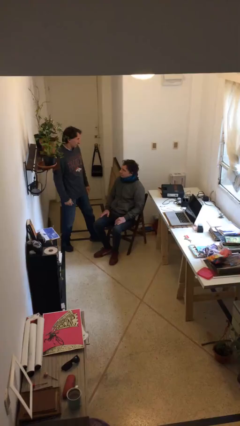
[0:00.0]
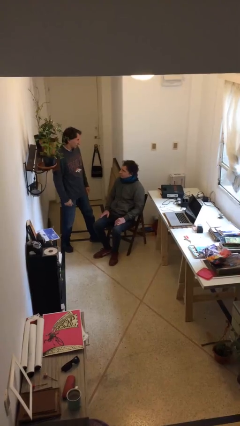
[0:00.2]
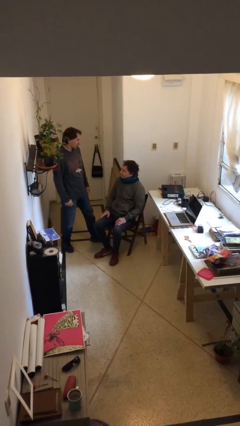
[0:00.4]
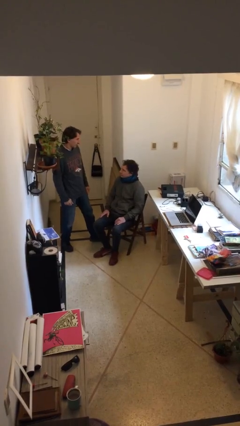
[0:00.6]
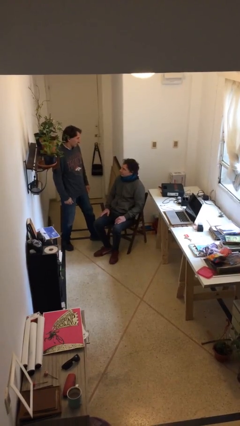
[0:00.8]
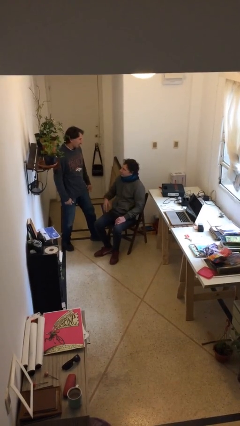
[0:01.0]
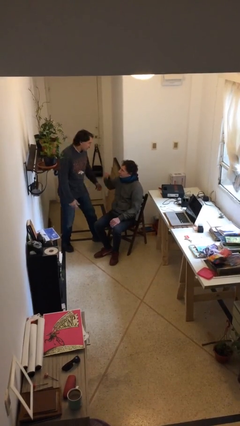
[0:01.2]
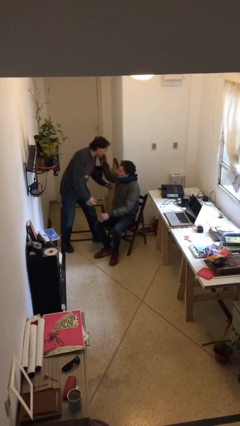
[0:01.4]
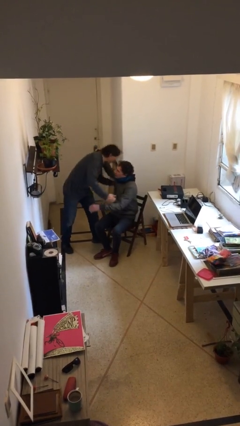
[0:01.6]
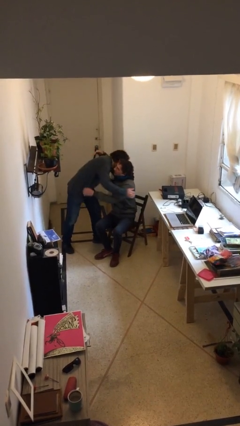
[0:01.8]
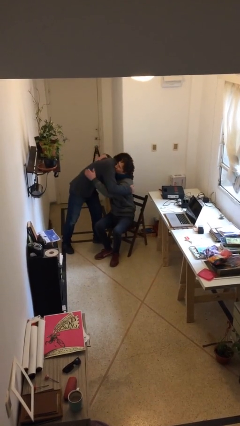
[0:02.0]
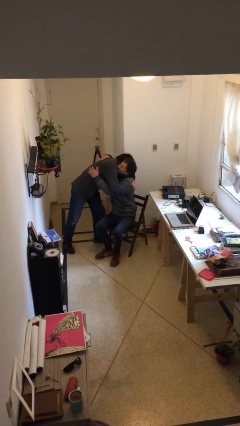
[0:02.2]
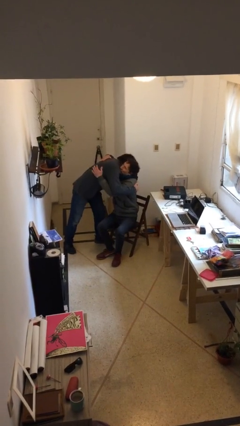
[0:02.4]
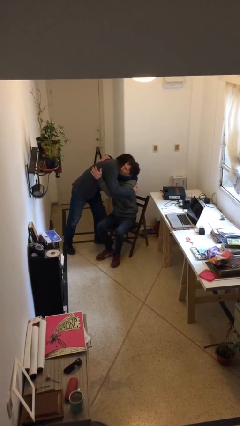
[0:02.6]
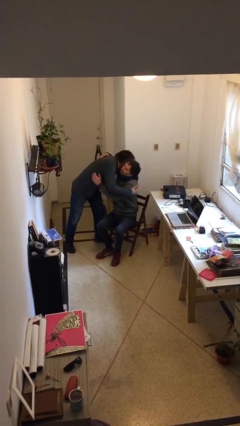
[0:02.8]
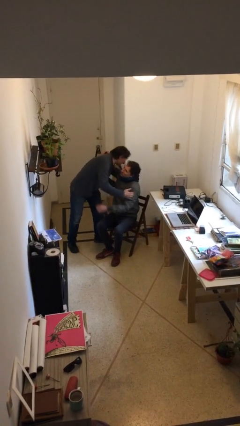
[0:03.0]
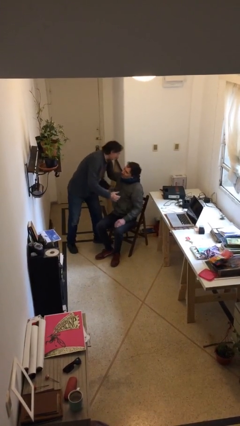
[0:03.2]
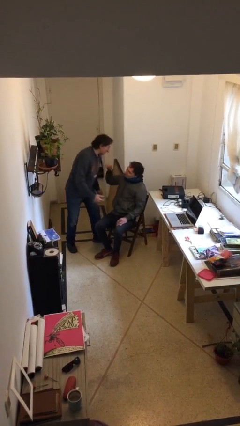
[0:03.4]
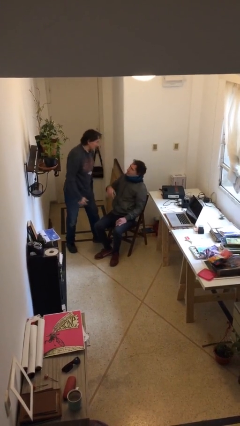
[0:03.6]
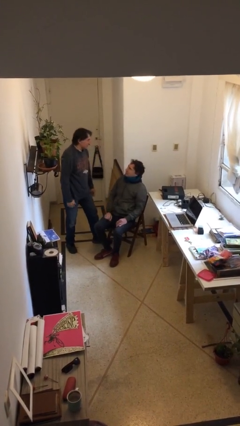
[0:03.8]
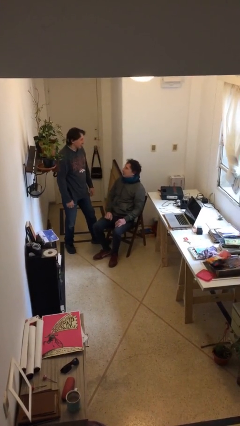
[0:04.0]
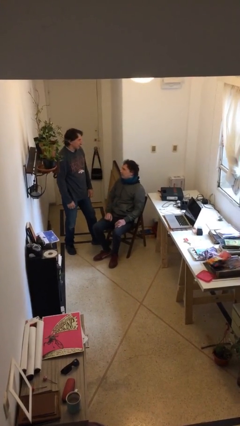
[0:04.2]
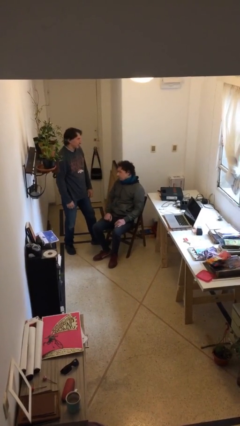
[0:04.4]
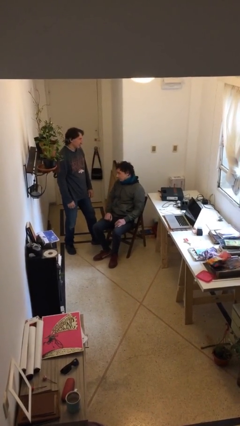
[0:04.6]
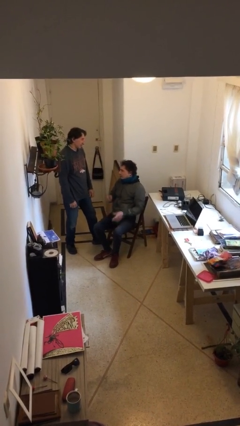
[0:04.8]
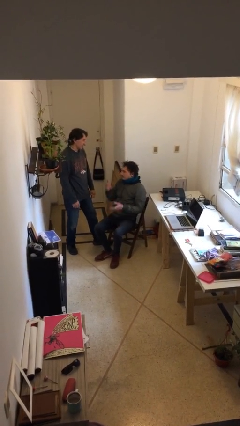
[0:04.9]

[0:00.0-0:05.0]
person embraces person

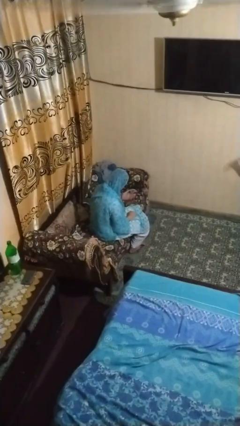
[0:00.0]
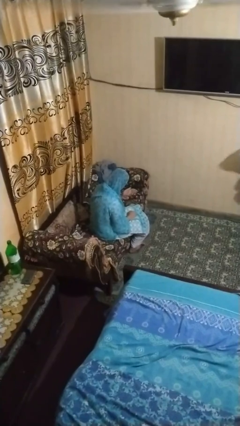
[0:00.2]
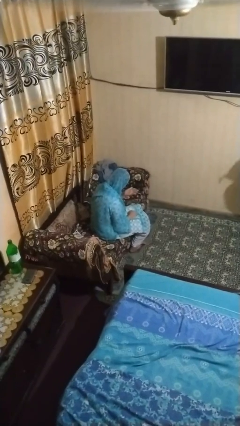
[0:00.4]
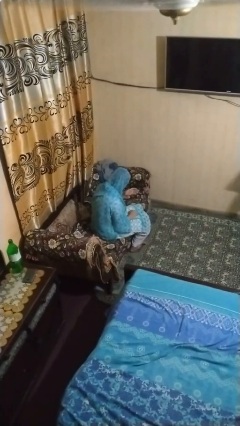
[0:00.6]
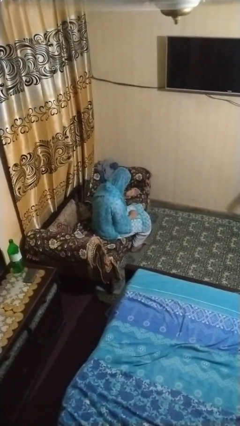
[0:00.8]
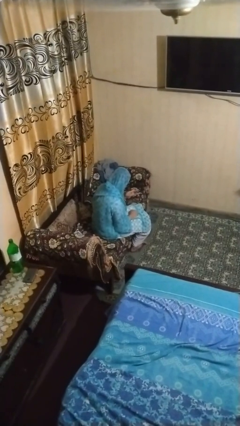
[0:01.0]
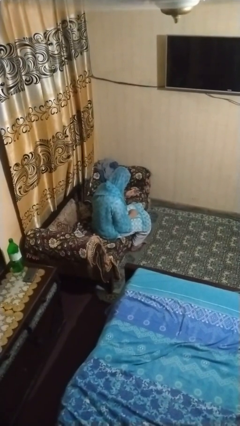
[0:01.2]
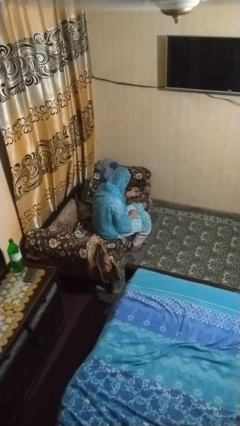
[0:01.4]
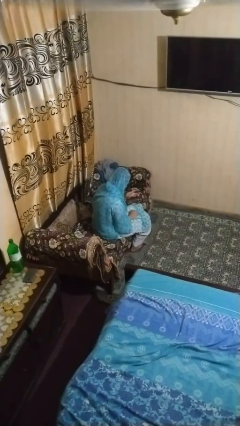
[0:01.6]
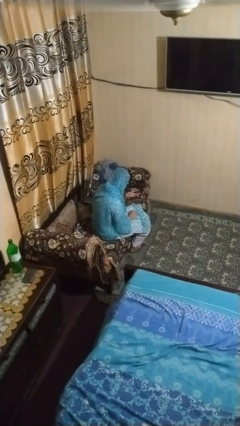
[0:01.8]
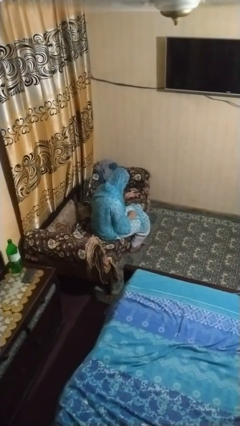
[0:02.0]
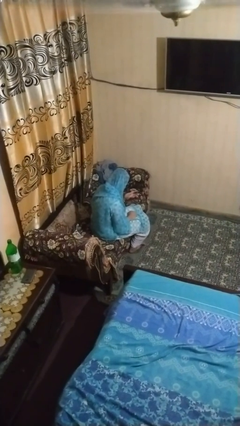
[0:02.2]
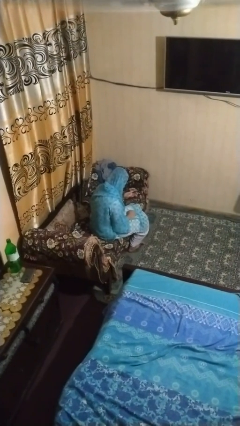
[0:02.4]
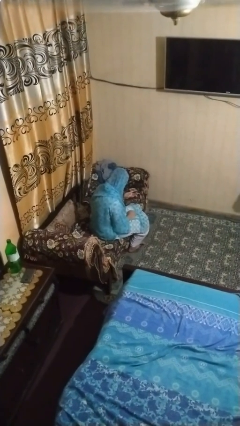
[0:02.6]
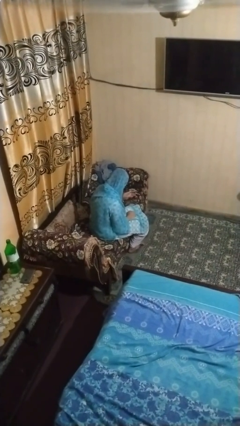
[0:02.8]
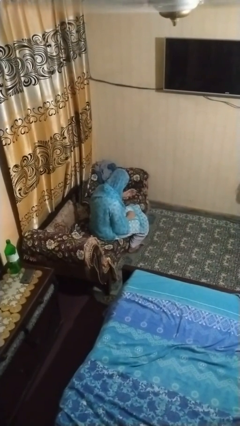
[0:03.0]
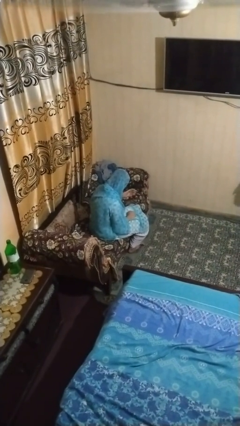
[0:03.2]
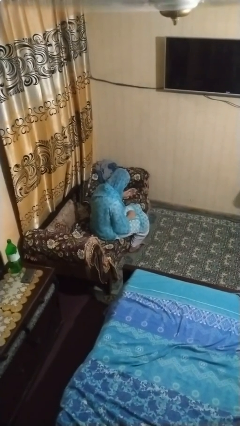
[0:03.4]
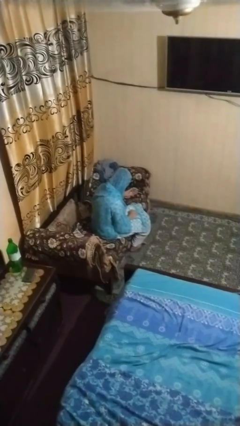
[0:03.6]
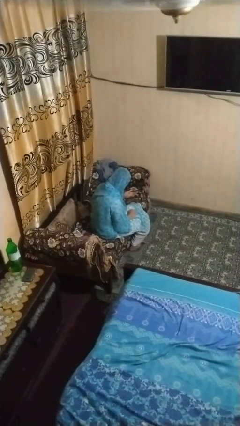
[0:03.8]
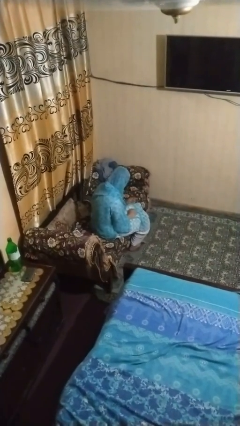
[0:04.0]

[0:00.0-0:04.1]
person looks at hands in lap

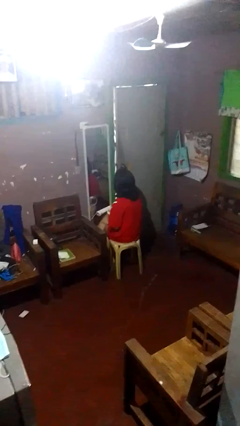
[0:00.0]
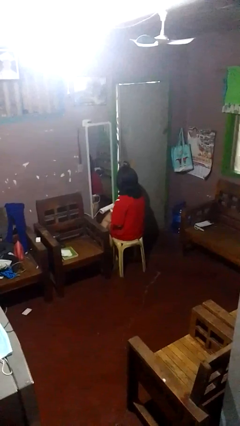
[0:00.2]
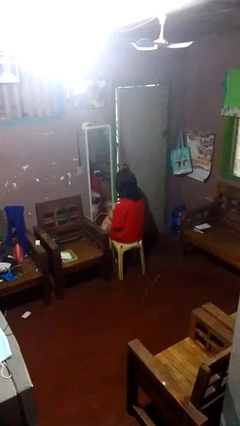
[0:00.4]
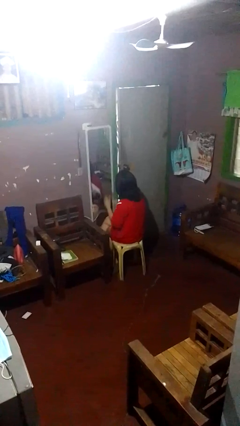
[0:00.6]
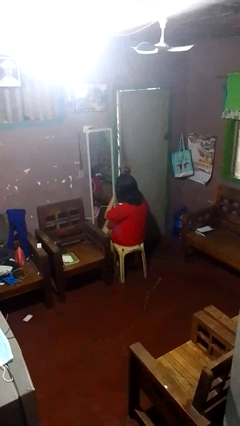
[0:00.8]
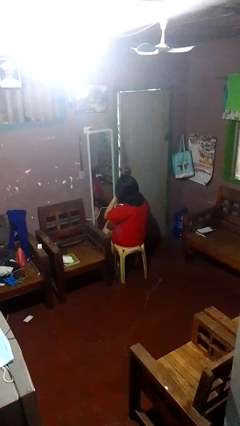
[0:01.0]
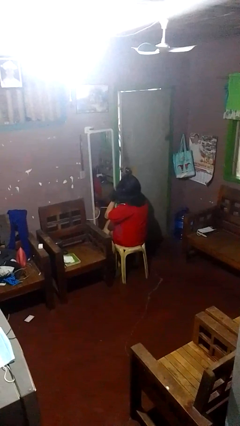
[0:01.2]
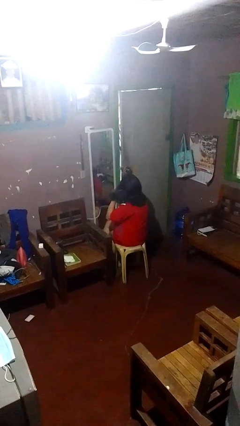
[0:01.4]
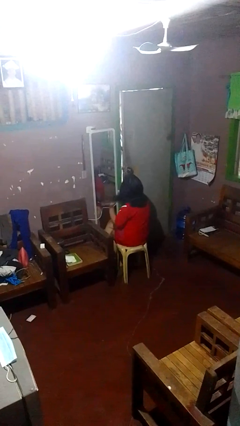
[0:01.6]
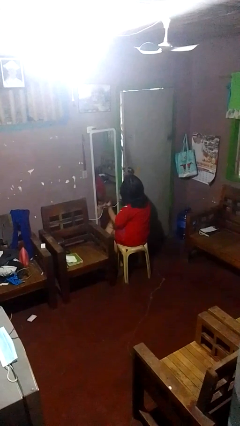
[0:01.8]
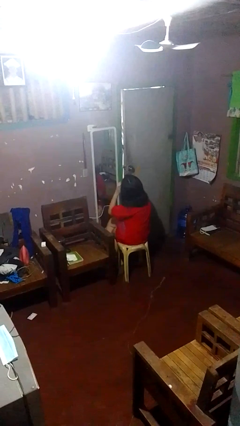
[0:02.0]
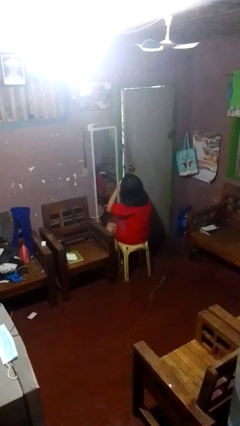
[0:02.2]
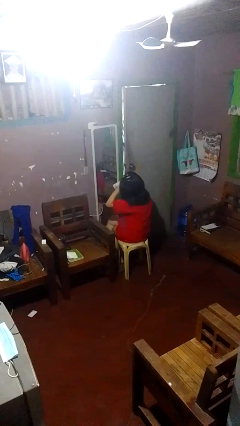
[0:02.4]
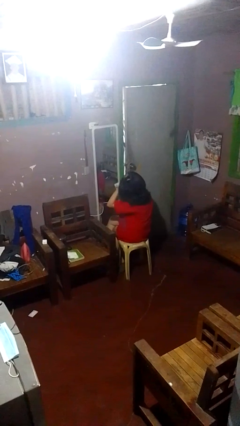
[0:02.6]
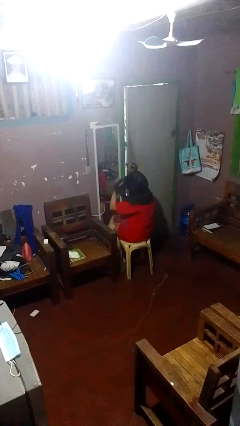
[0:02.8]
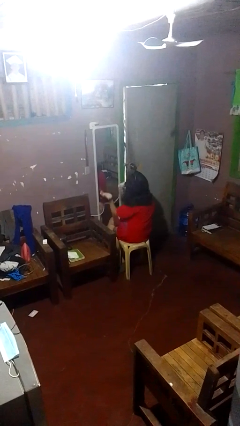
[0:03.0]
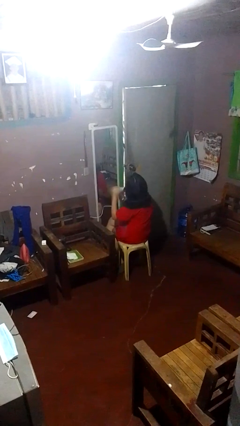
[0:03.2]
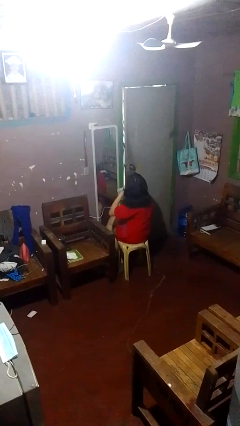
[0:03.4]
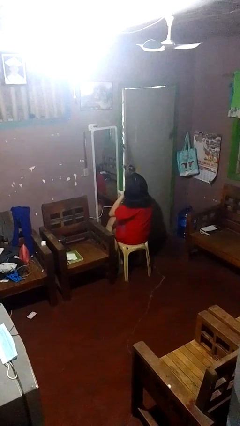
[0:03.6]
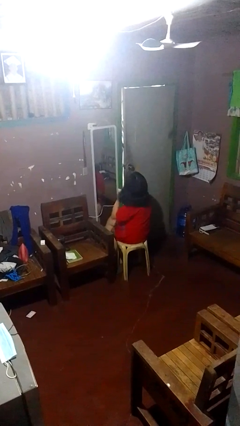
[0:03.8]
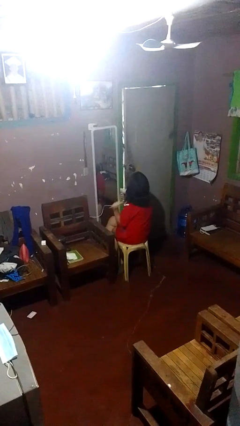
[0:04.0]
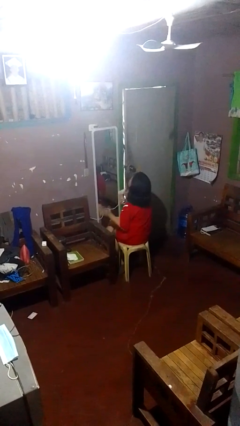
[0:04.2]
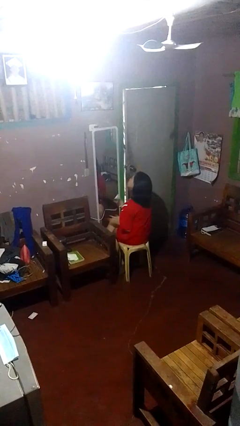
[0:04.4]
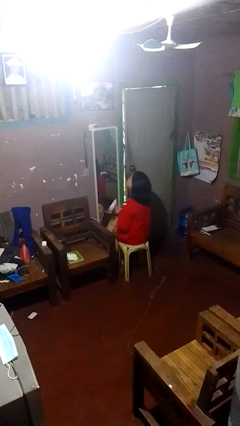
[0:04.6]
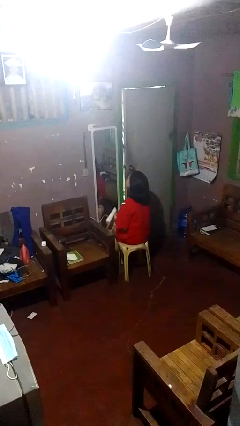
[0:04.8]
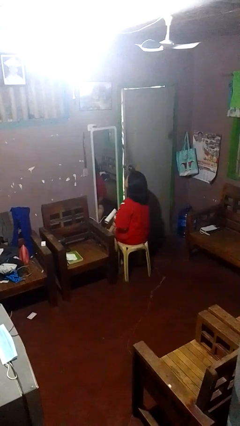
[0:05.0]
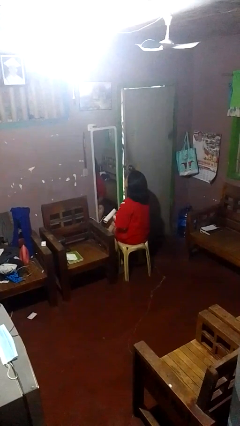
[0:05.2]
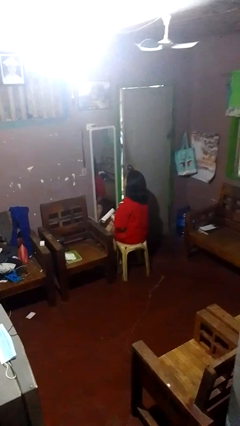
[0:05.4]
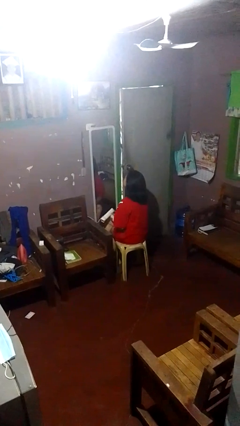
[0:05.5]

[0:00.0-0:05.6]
person dries hair with hairdryer

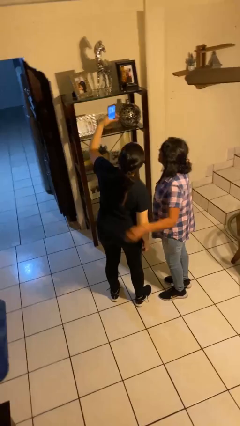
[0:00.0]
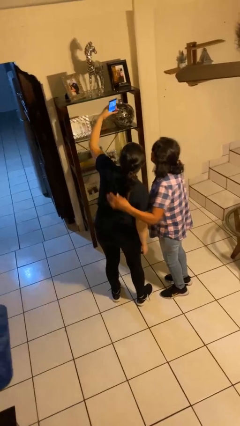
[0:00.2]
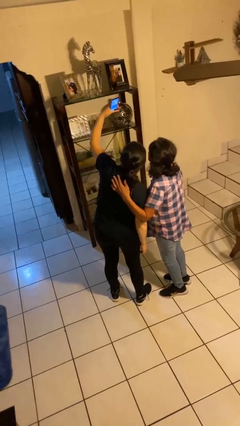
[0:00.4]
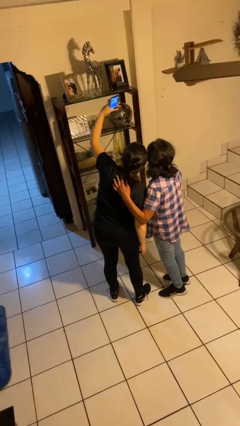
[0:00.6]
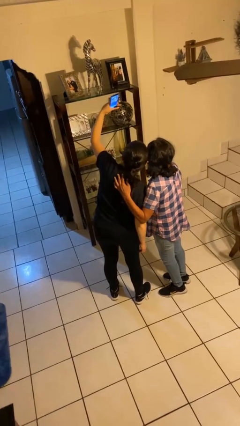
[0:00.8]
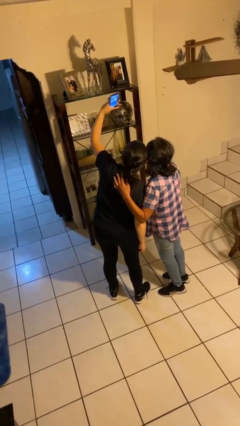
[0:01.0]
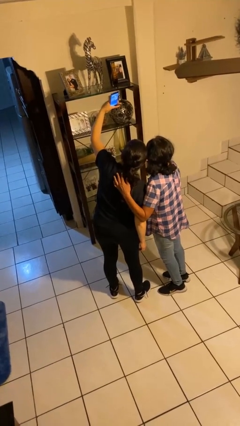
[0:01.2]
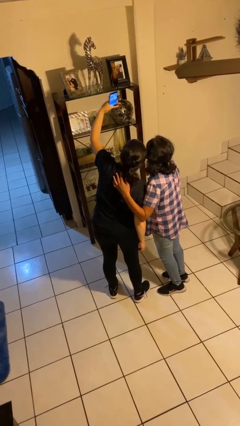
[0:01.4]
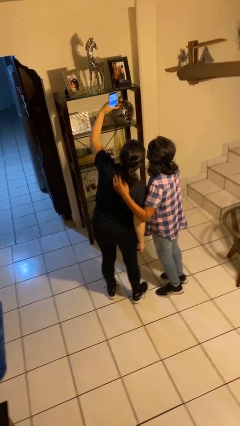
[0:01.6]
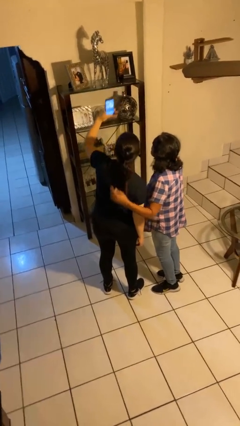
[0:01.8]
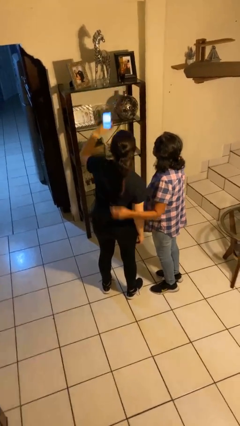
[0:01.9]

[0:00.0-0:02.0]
person takes selfie with person

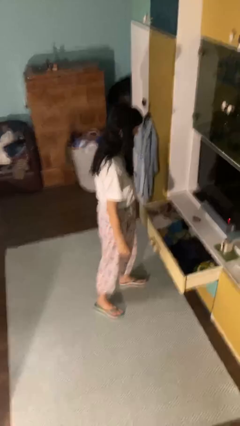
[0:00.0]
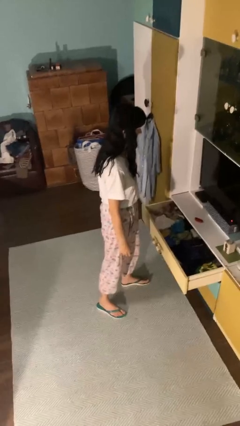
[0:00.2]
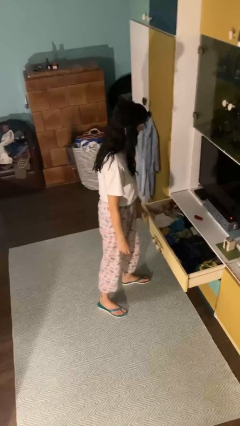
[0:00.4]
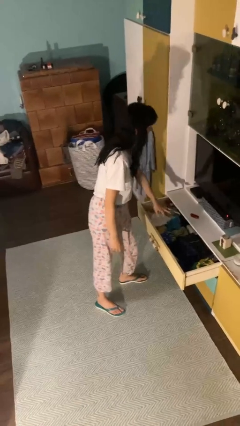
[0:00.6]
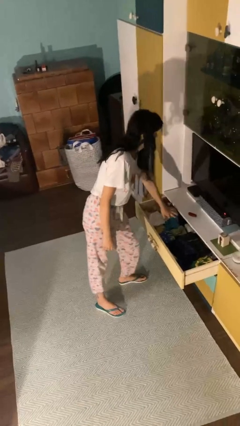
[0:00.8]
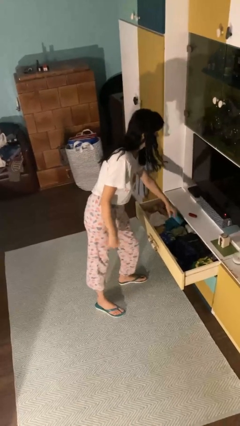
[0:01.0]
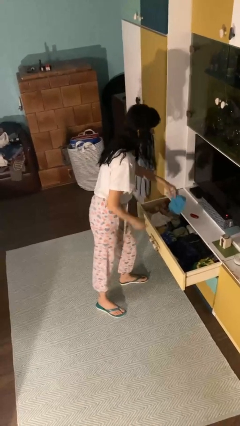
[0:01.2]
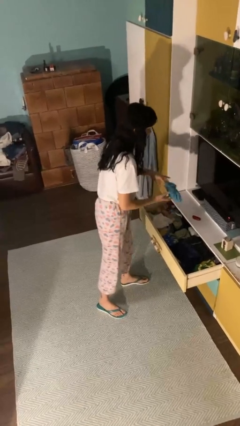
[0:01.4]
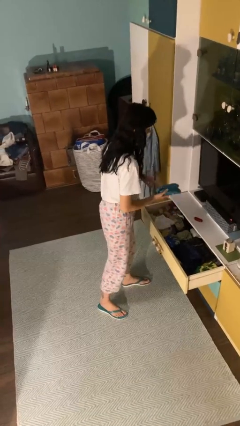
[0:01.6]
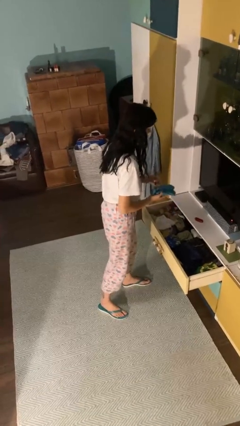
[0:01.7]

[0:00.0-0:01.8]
person takes clothes from dresser
